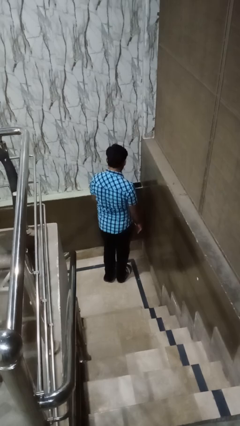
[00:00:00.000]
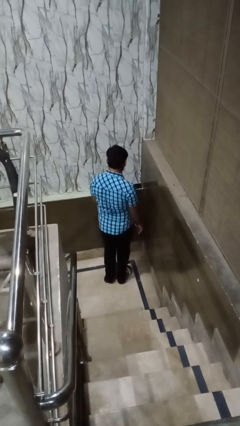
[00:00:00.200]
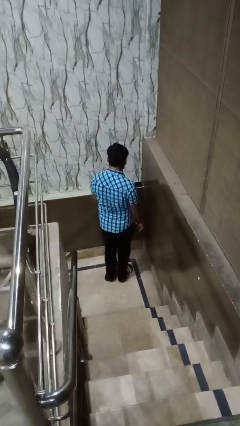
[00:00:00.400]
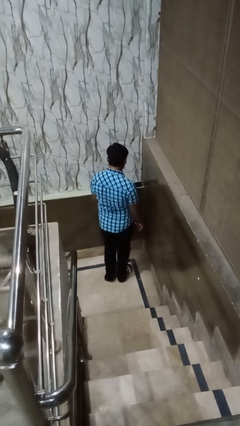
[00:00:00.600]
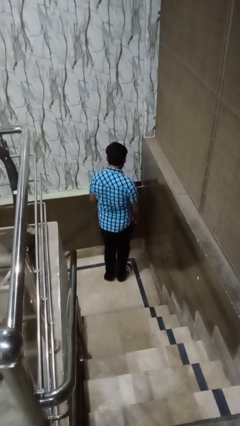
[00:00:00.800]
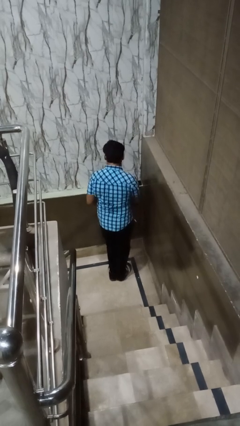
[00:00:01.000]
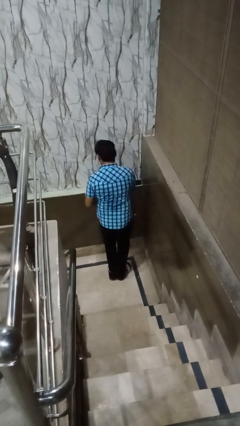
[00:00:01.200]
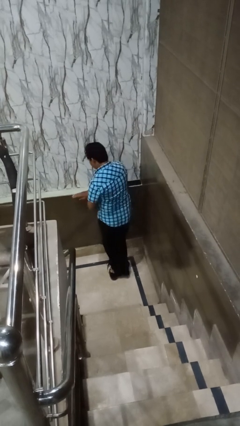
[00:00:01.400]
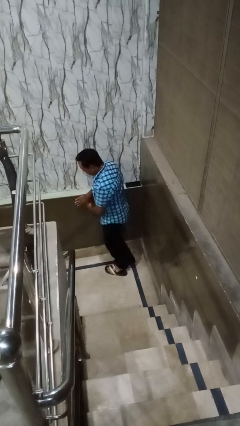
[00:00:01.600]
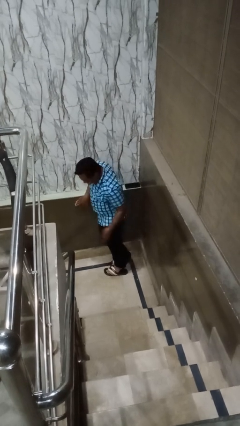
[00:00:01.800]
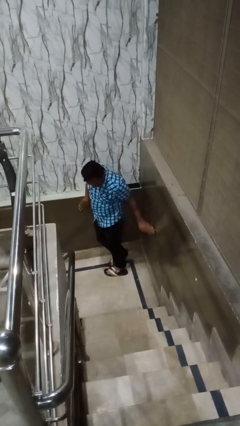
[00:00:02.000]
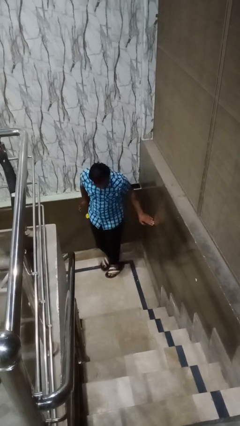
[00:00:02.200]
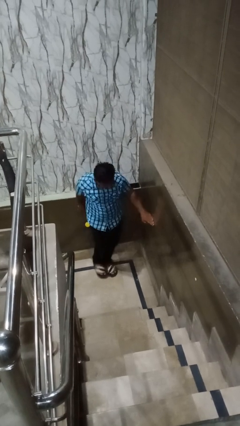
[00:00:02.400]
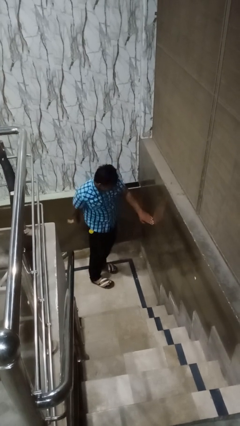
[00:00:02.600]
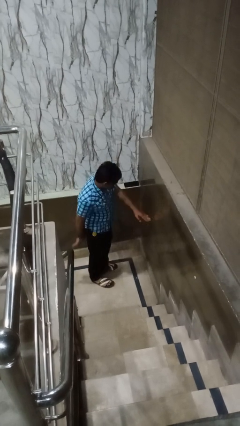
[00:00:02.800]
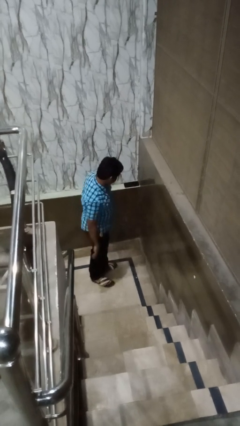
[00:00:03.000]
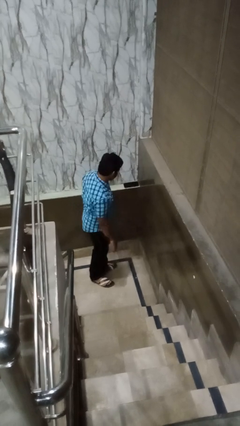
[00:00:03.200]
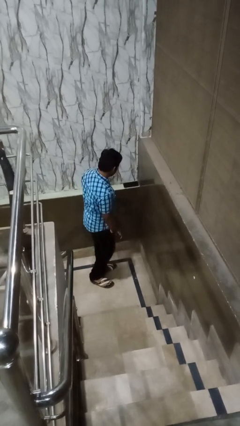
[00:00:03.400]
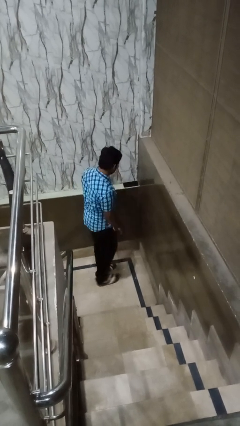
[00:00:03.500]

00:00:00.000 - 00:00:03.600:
person twirls

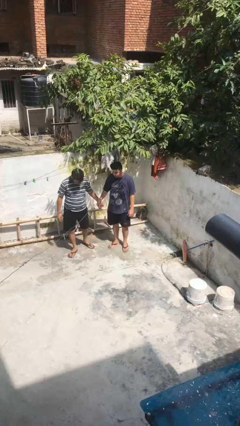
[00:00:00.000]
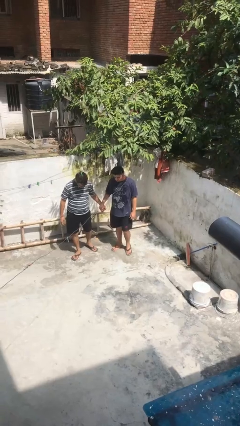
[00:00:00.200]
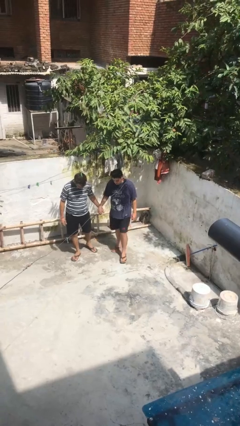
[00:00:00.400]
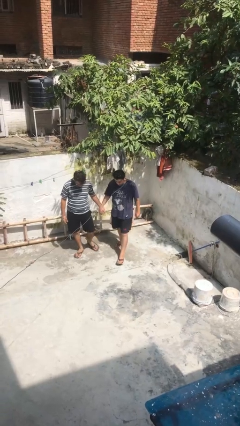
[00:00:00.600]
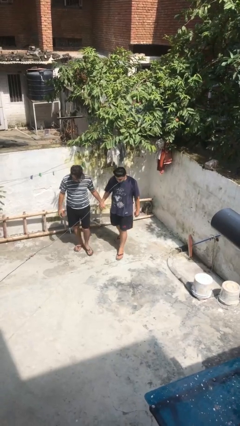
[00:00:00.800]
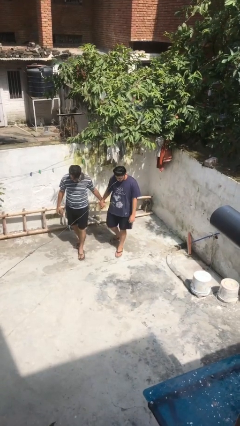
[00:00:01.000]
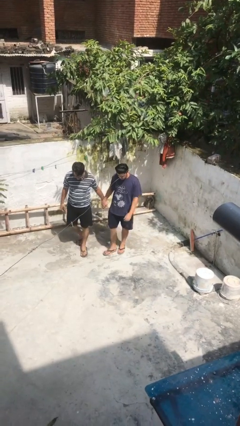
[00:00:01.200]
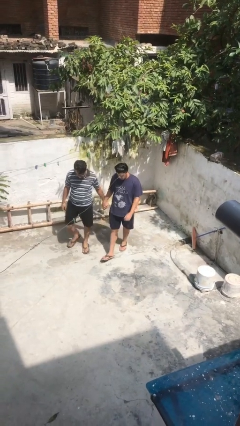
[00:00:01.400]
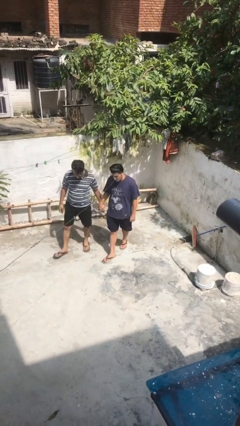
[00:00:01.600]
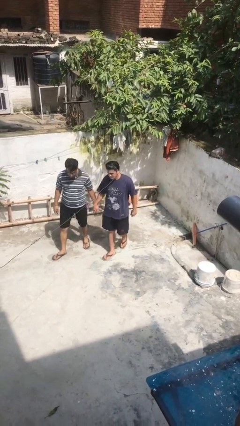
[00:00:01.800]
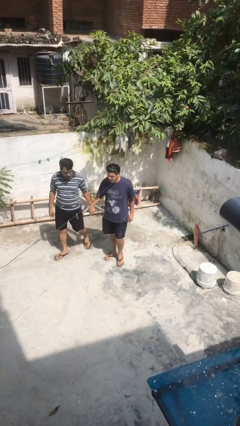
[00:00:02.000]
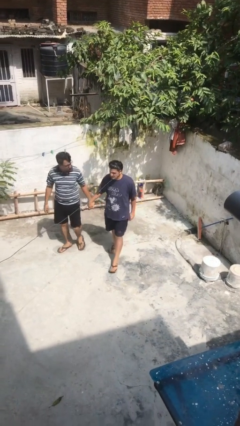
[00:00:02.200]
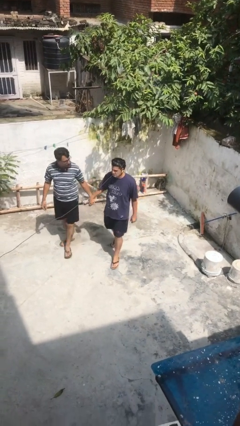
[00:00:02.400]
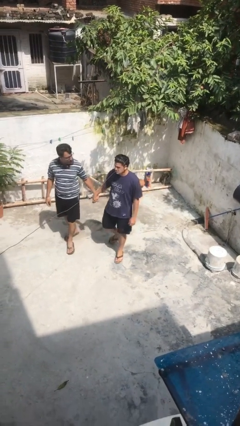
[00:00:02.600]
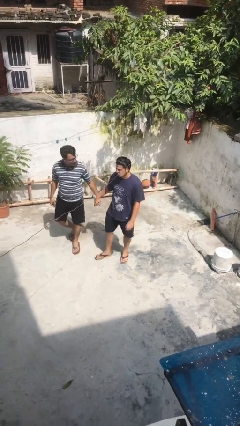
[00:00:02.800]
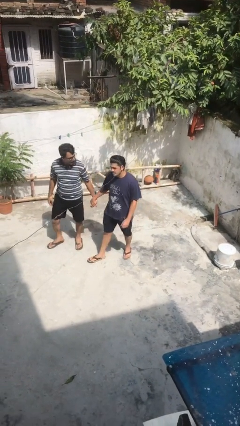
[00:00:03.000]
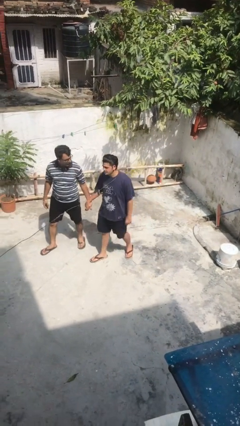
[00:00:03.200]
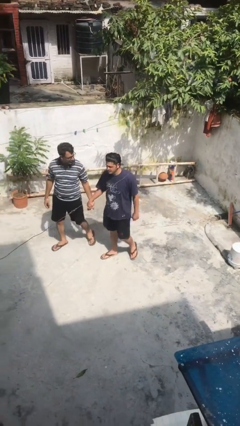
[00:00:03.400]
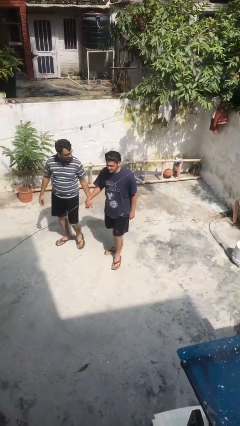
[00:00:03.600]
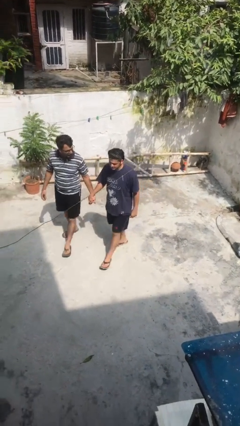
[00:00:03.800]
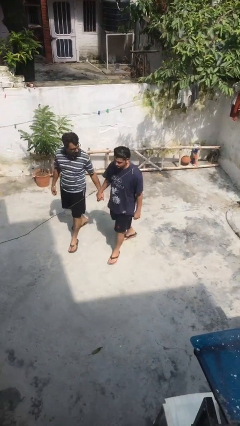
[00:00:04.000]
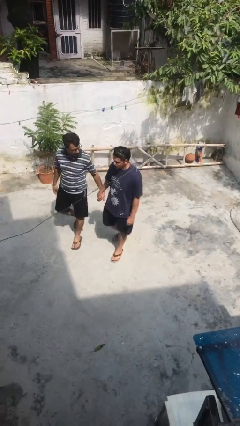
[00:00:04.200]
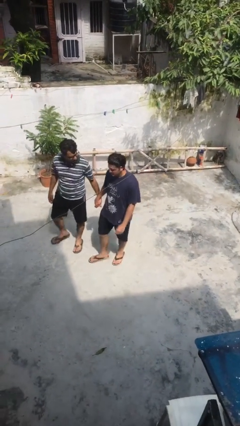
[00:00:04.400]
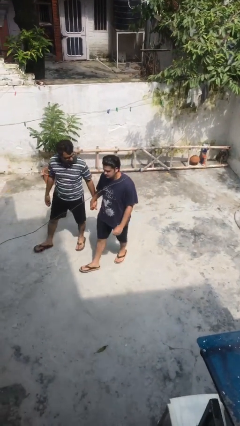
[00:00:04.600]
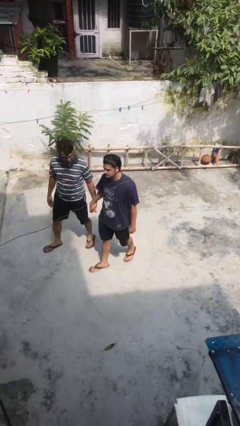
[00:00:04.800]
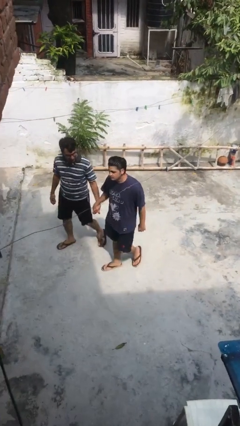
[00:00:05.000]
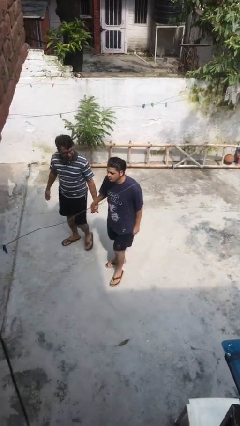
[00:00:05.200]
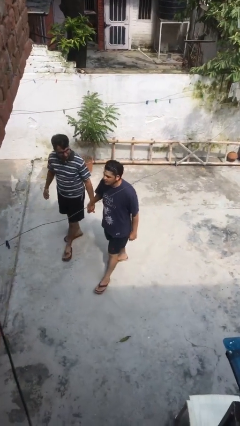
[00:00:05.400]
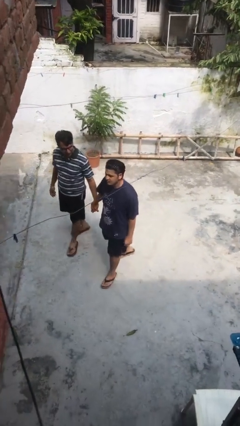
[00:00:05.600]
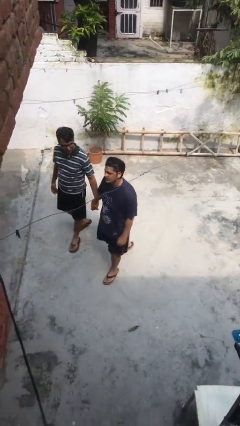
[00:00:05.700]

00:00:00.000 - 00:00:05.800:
person holds hand

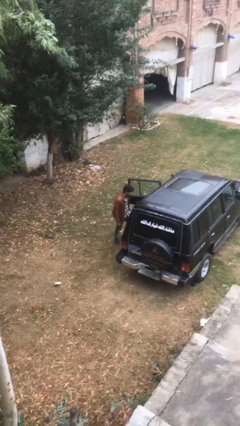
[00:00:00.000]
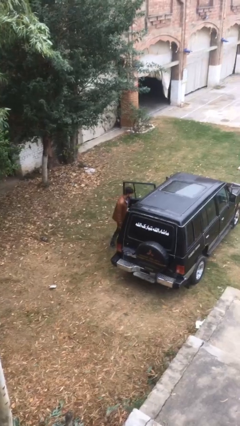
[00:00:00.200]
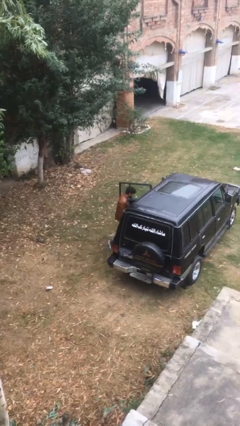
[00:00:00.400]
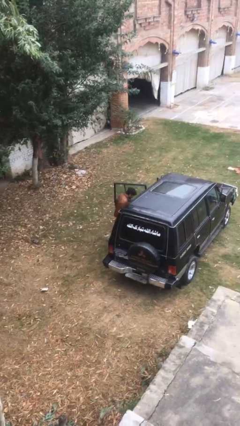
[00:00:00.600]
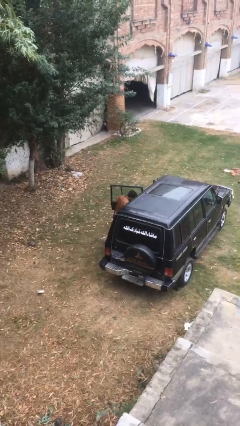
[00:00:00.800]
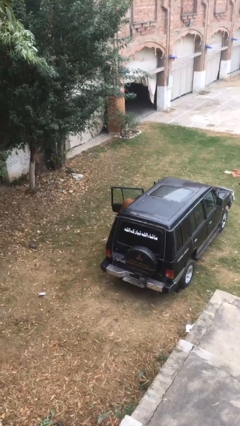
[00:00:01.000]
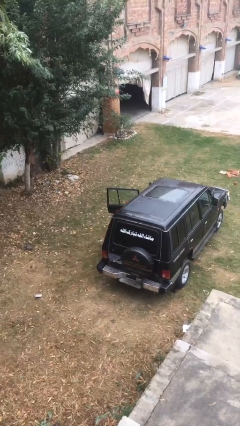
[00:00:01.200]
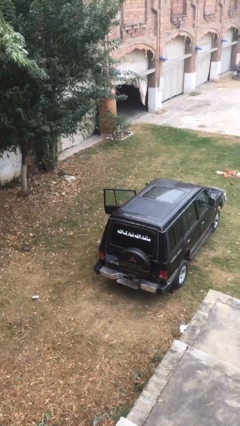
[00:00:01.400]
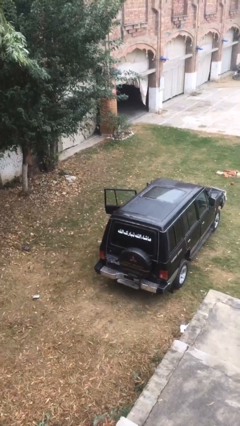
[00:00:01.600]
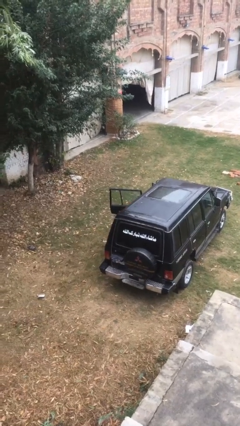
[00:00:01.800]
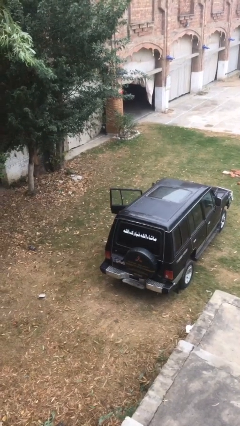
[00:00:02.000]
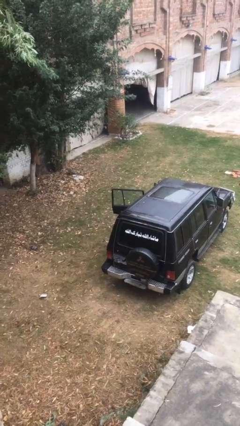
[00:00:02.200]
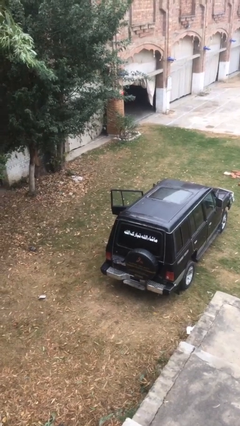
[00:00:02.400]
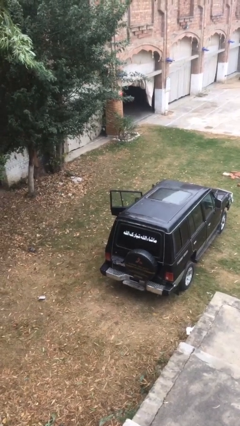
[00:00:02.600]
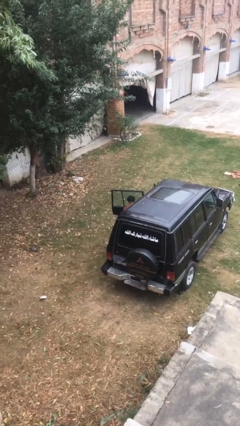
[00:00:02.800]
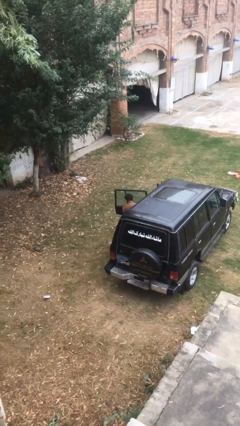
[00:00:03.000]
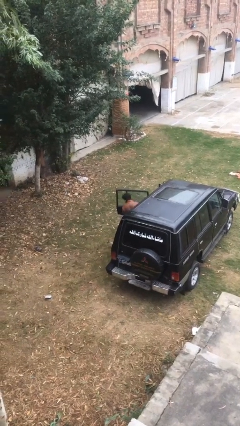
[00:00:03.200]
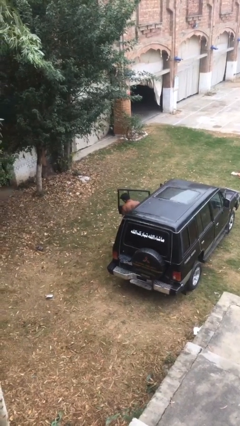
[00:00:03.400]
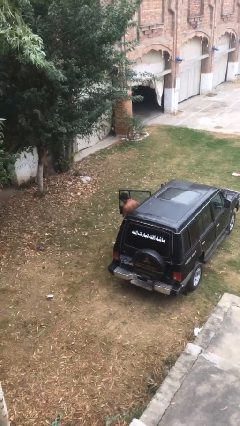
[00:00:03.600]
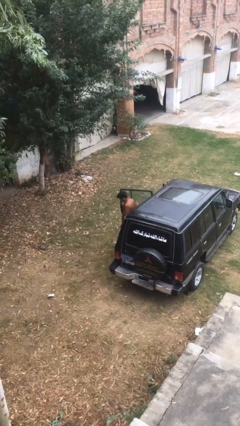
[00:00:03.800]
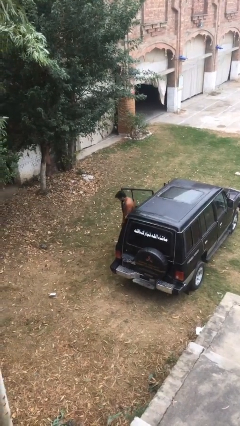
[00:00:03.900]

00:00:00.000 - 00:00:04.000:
person enters car

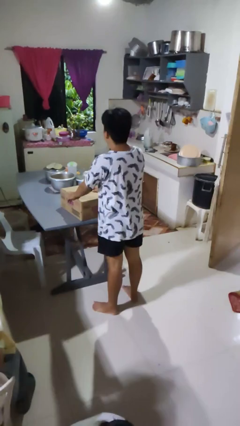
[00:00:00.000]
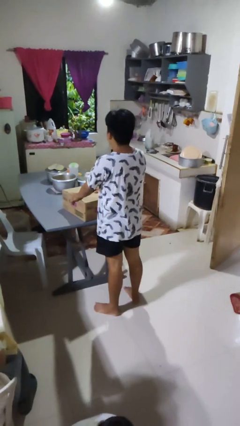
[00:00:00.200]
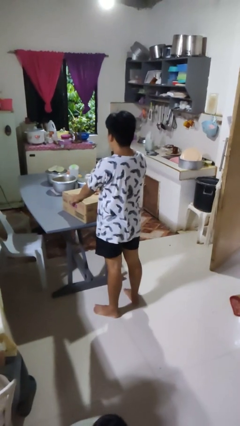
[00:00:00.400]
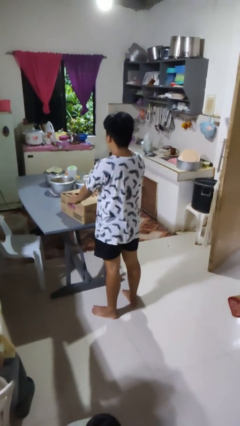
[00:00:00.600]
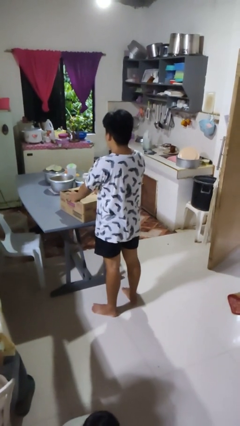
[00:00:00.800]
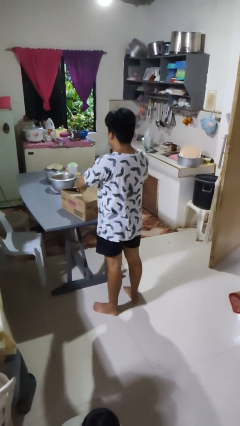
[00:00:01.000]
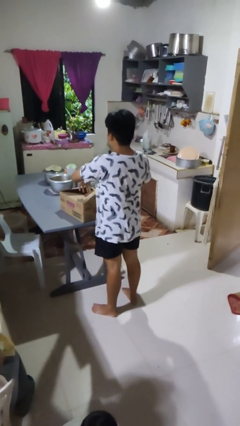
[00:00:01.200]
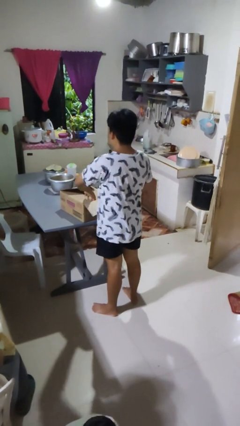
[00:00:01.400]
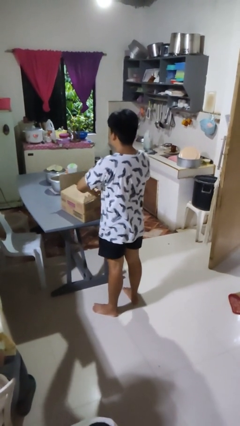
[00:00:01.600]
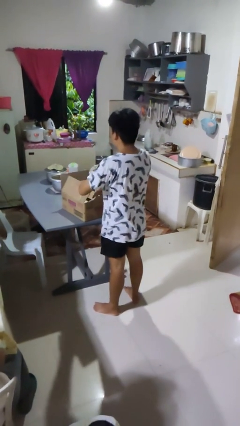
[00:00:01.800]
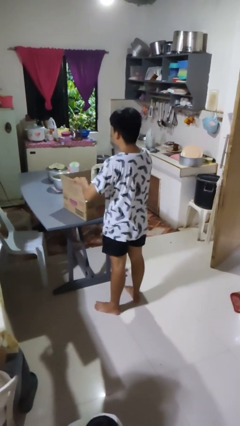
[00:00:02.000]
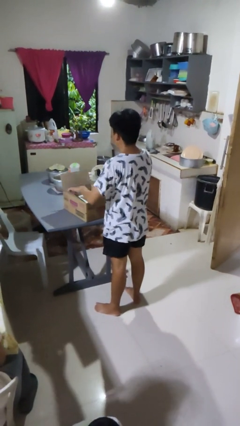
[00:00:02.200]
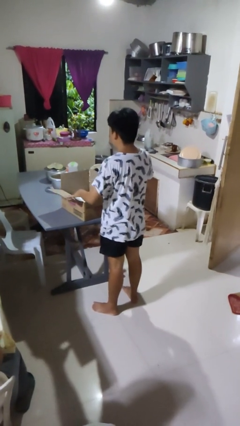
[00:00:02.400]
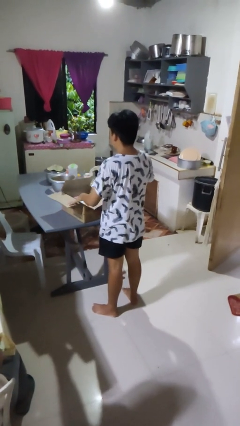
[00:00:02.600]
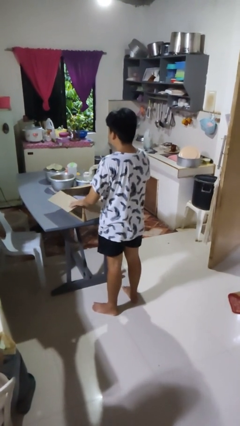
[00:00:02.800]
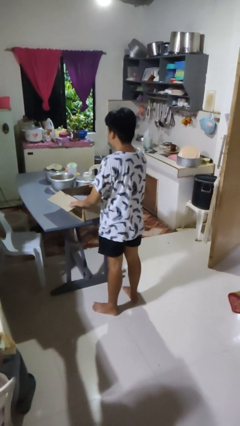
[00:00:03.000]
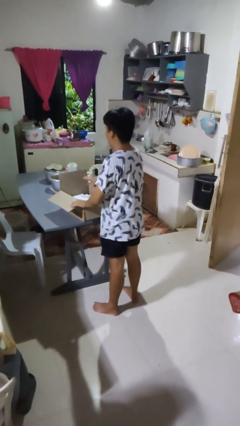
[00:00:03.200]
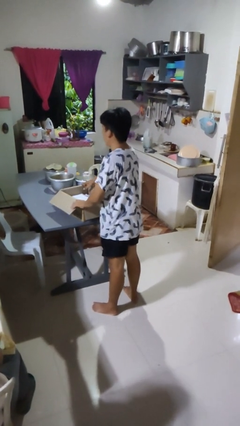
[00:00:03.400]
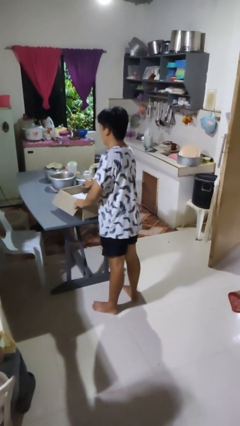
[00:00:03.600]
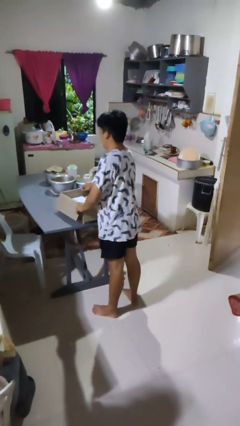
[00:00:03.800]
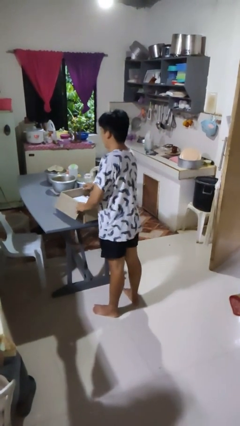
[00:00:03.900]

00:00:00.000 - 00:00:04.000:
person opens box
